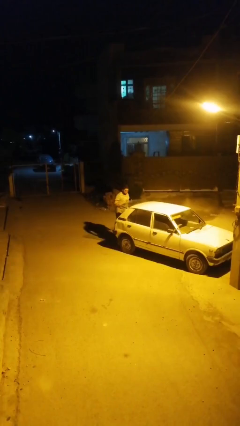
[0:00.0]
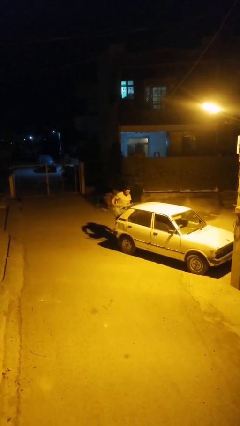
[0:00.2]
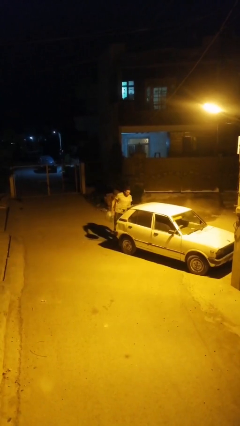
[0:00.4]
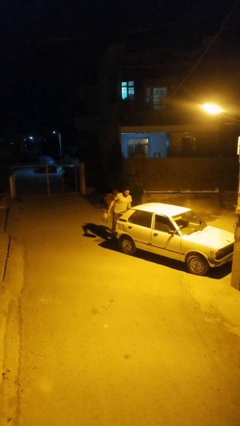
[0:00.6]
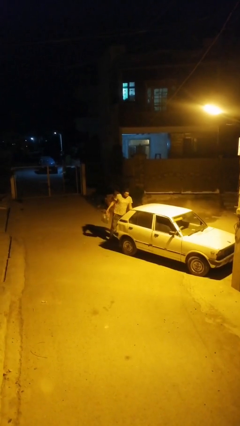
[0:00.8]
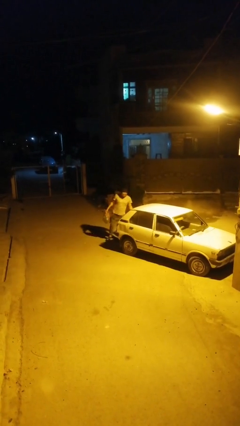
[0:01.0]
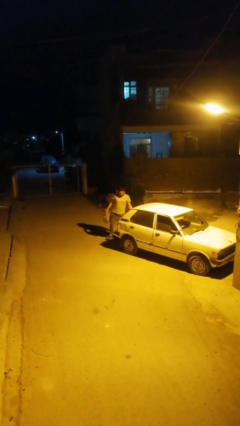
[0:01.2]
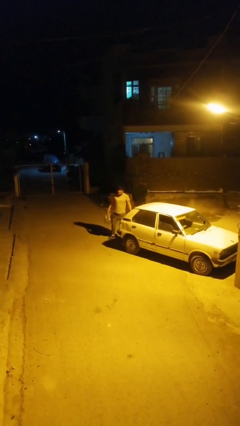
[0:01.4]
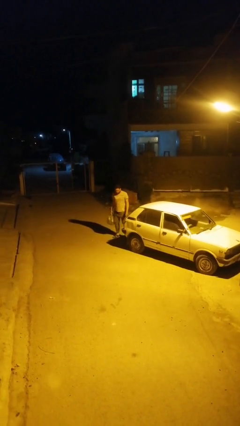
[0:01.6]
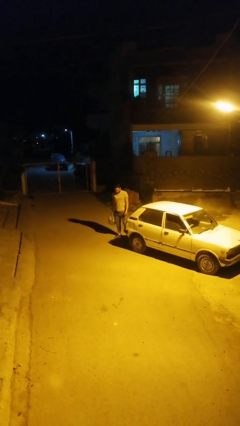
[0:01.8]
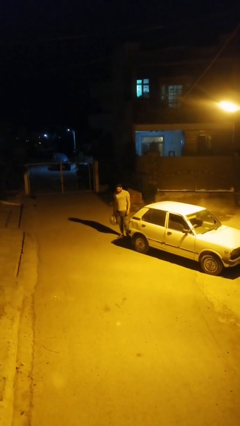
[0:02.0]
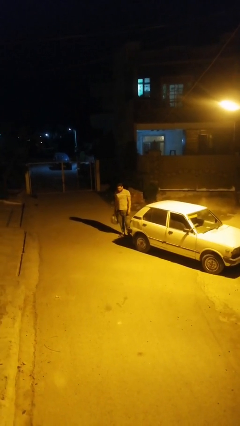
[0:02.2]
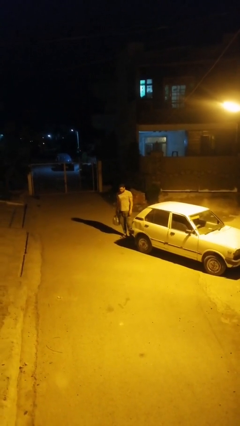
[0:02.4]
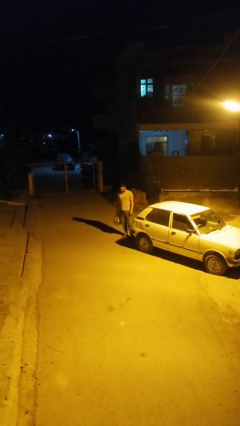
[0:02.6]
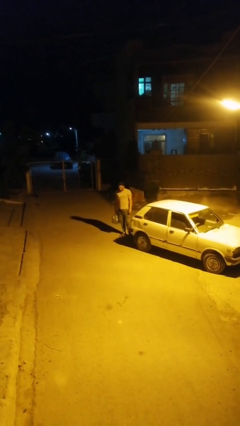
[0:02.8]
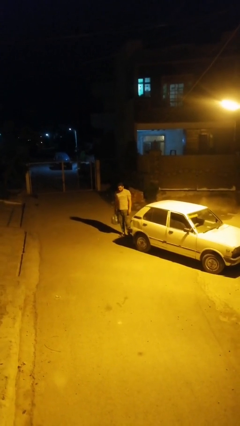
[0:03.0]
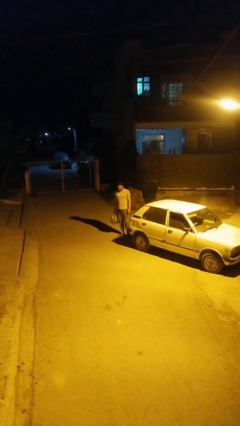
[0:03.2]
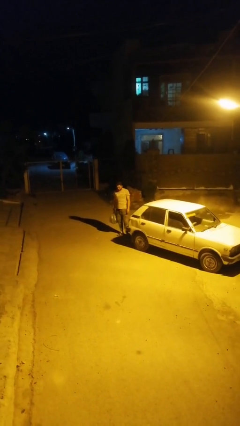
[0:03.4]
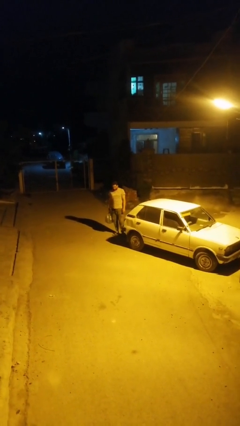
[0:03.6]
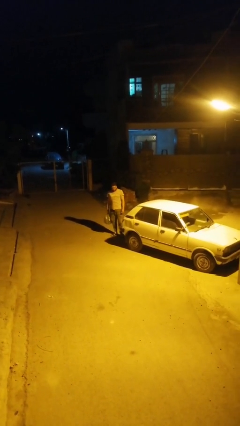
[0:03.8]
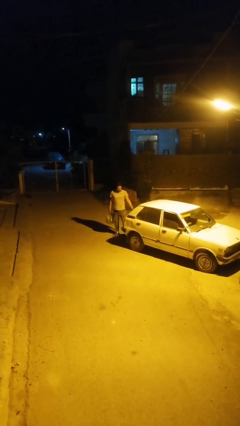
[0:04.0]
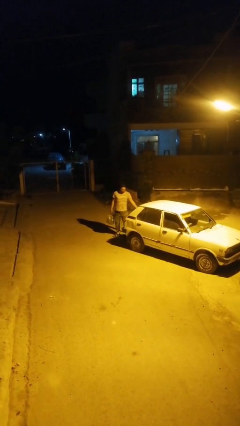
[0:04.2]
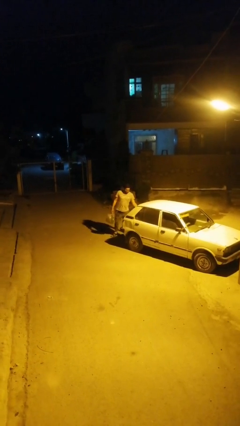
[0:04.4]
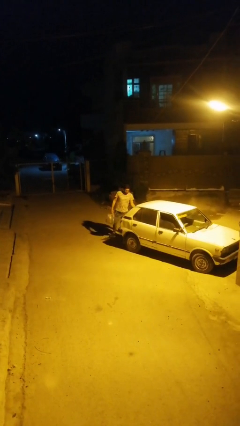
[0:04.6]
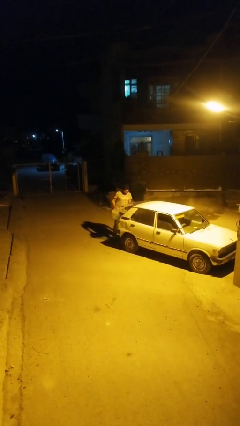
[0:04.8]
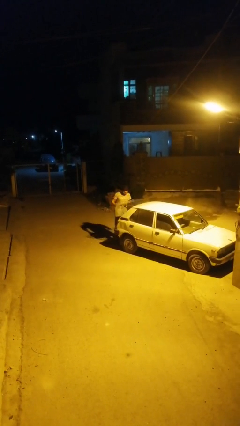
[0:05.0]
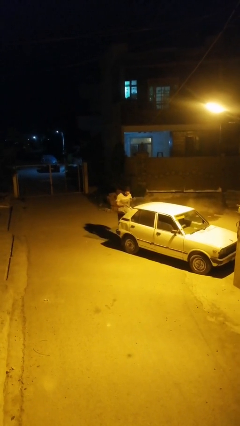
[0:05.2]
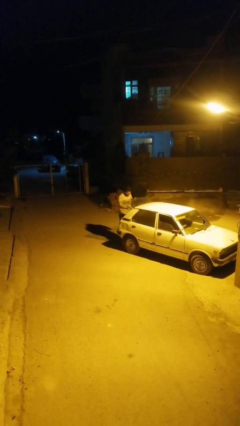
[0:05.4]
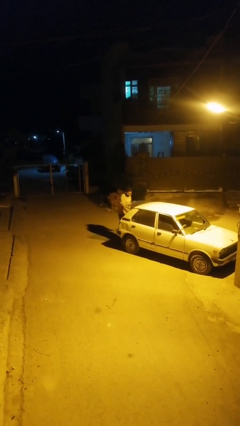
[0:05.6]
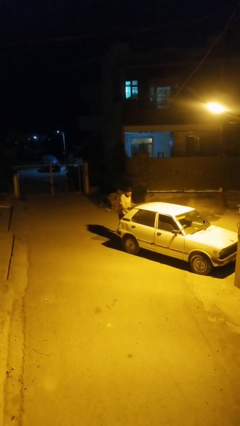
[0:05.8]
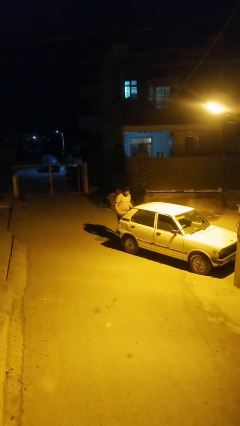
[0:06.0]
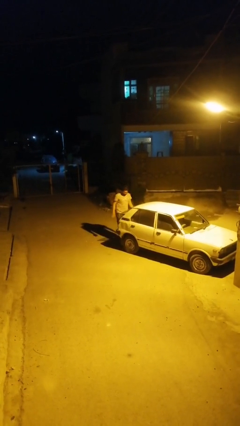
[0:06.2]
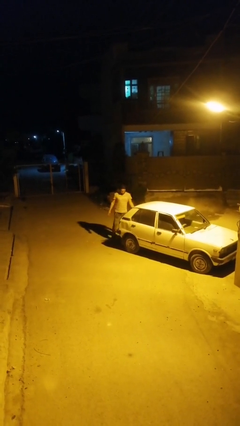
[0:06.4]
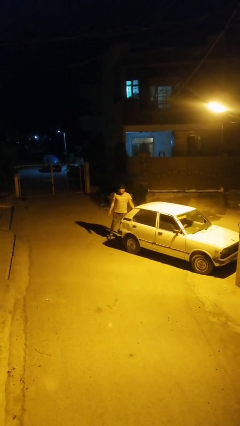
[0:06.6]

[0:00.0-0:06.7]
person unloads car

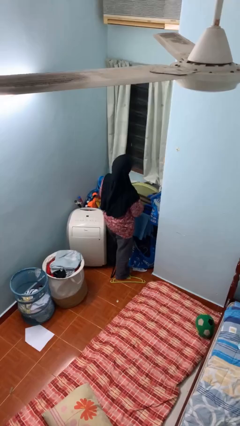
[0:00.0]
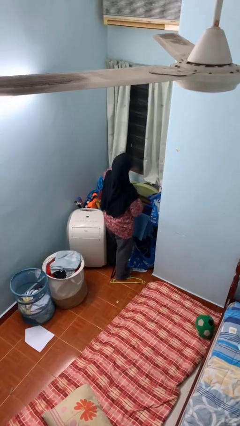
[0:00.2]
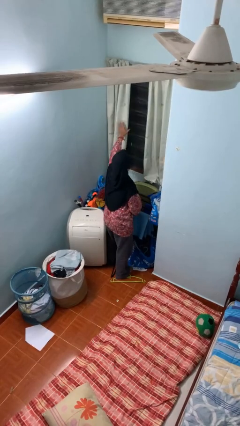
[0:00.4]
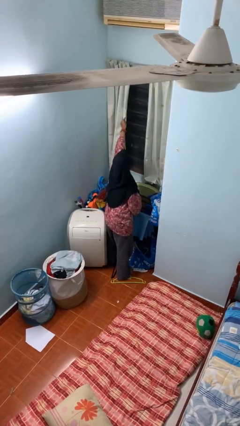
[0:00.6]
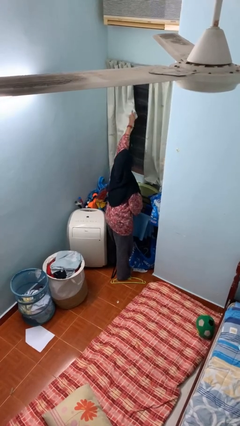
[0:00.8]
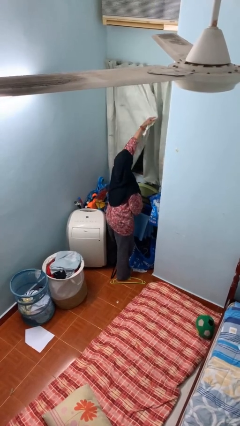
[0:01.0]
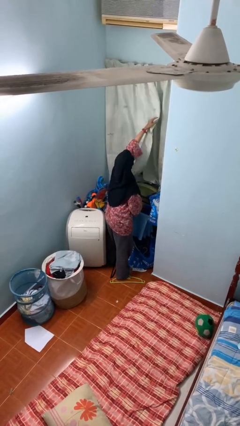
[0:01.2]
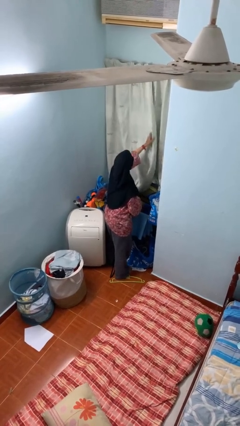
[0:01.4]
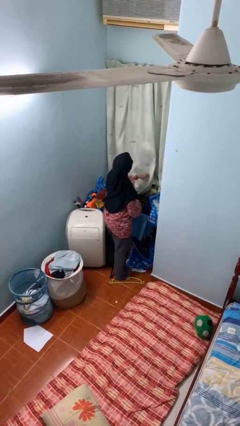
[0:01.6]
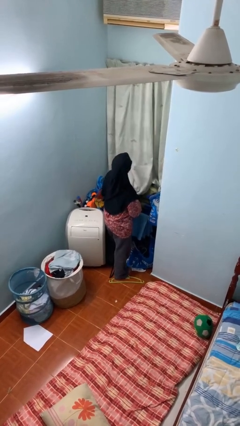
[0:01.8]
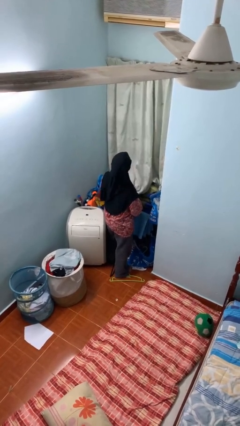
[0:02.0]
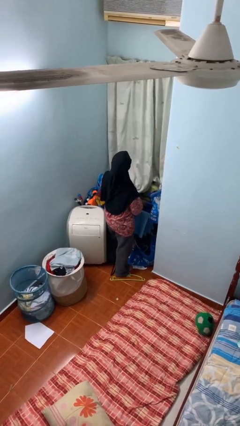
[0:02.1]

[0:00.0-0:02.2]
person closes curtains

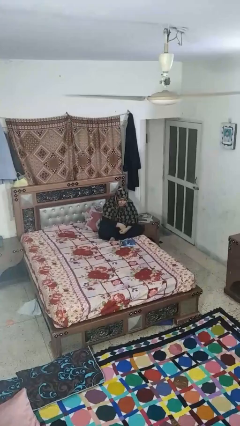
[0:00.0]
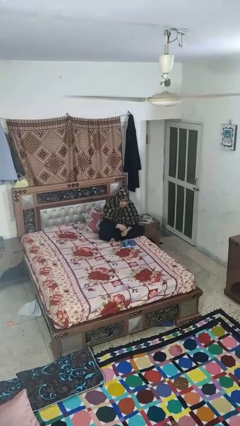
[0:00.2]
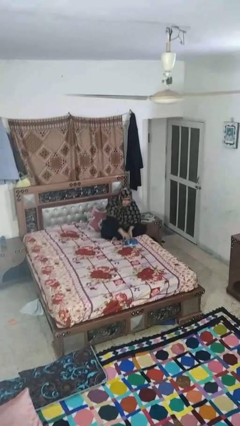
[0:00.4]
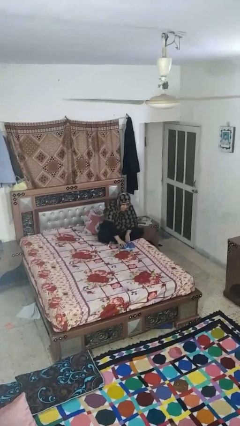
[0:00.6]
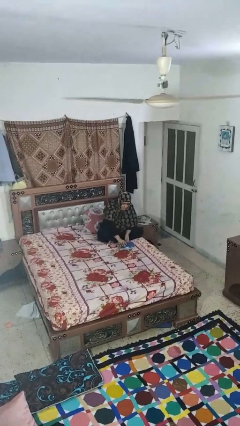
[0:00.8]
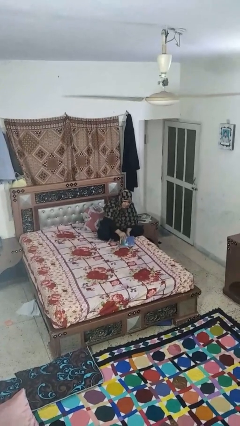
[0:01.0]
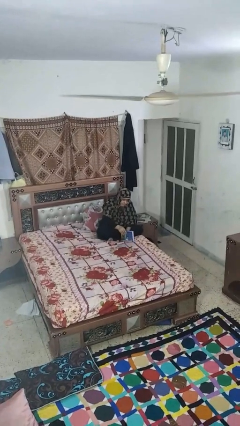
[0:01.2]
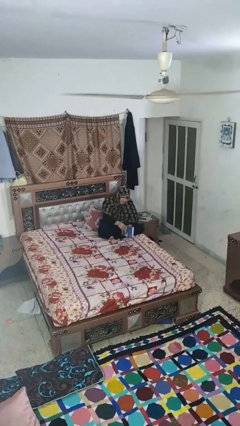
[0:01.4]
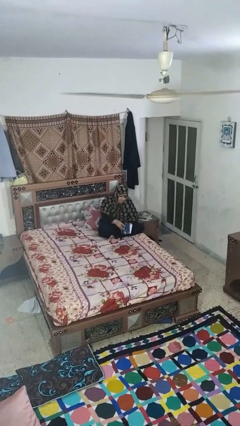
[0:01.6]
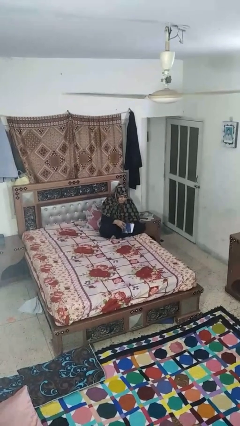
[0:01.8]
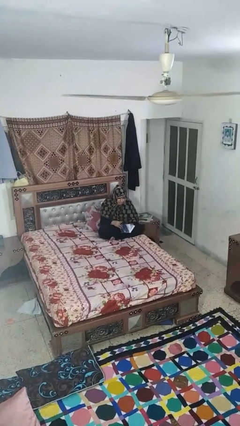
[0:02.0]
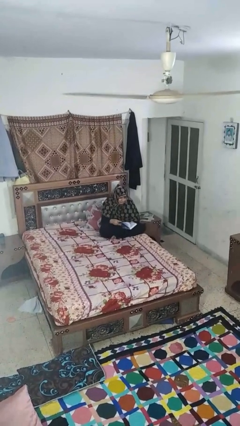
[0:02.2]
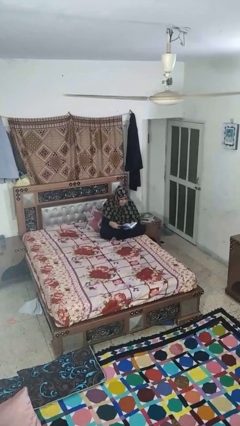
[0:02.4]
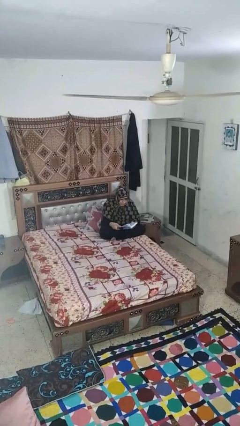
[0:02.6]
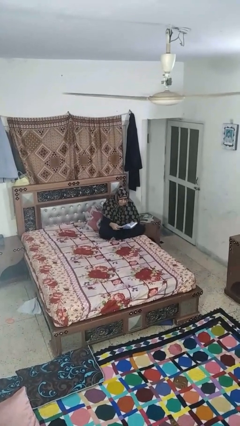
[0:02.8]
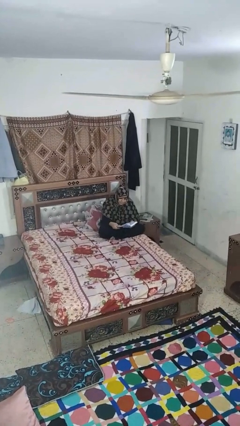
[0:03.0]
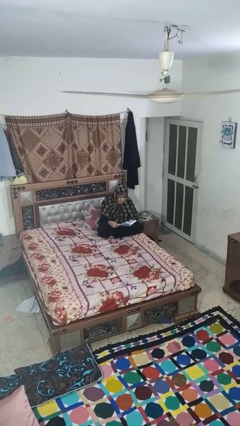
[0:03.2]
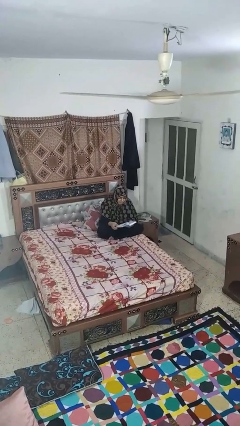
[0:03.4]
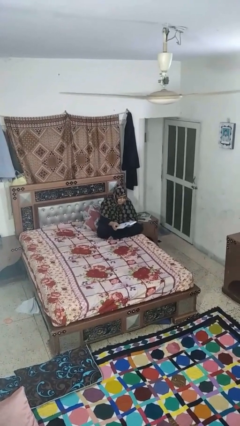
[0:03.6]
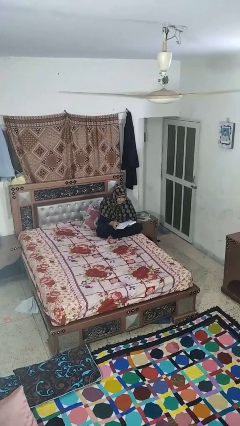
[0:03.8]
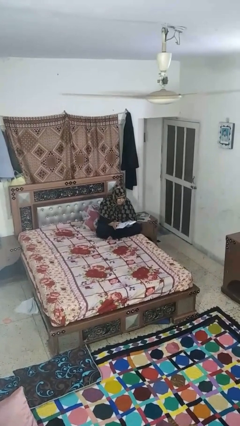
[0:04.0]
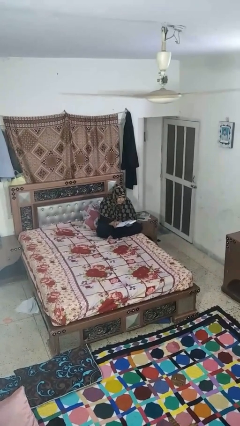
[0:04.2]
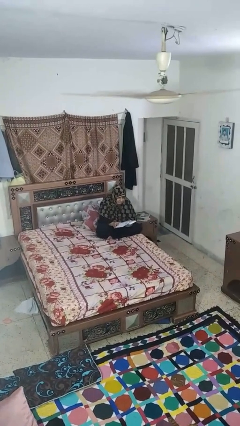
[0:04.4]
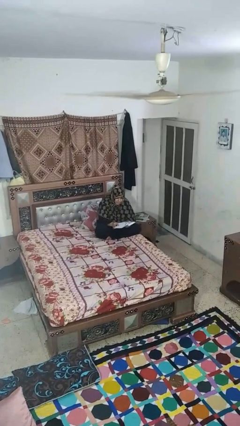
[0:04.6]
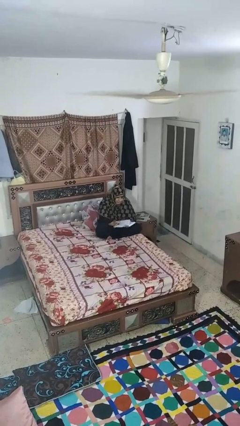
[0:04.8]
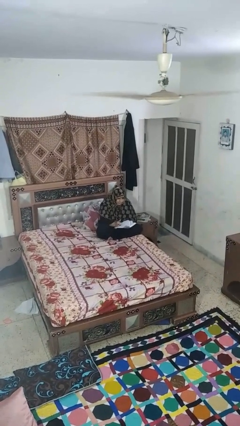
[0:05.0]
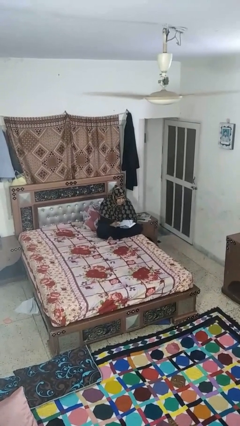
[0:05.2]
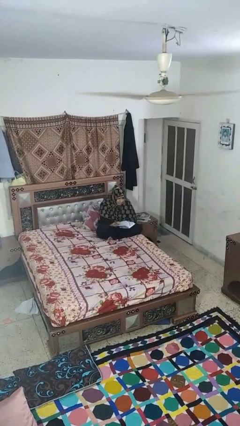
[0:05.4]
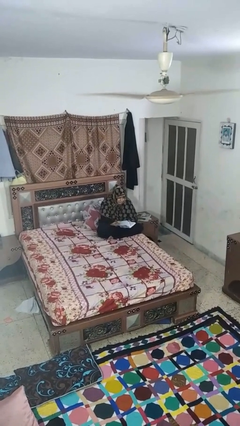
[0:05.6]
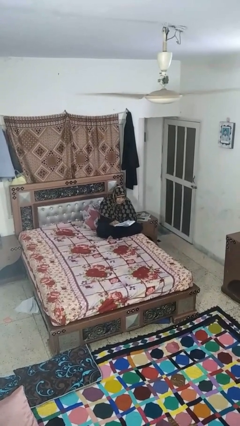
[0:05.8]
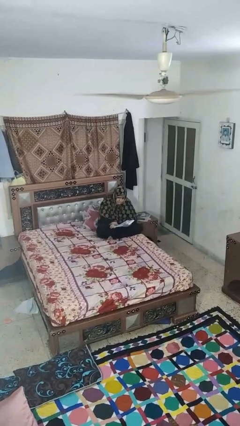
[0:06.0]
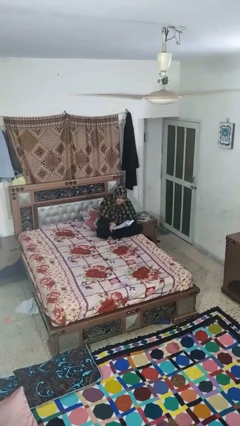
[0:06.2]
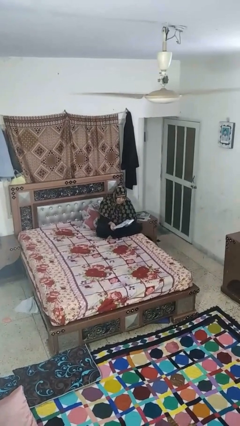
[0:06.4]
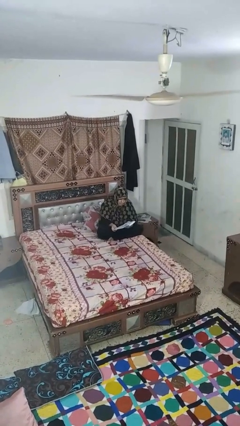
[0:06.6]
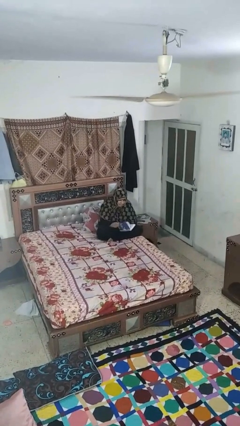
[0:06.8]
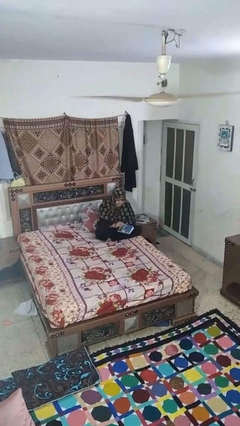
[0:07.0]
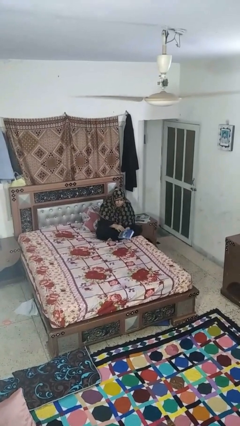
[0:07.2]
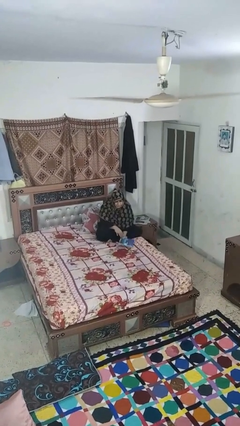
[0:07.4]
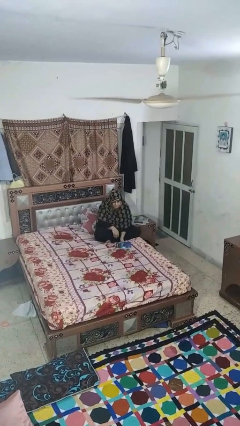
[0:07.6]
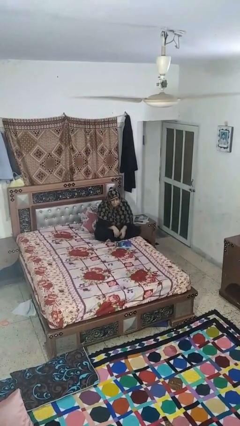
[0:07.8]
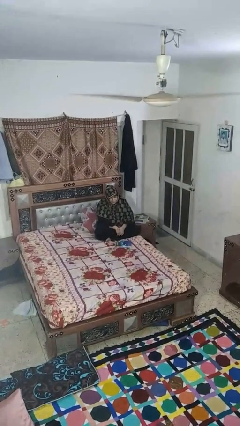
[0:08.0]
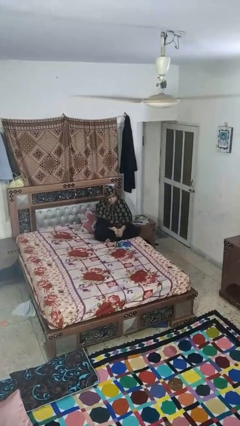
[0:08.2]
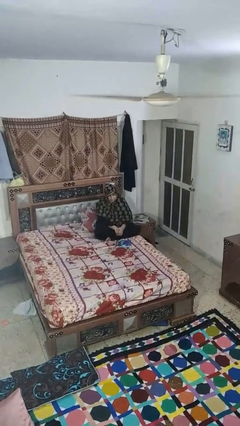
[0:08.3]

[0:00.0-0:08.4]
person reads book

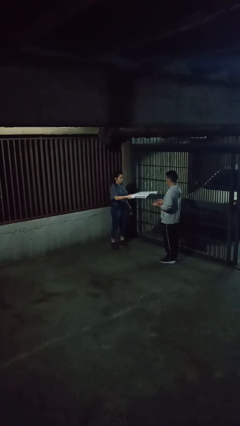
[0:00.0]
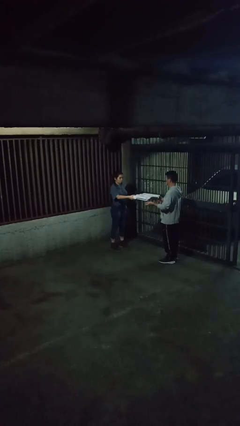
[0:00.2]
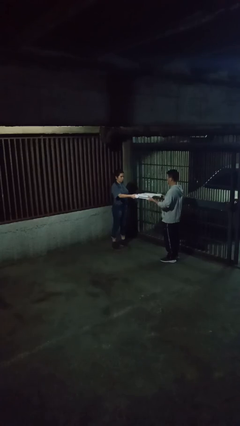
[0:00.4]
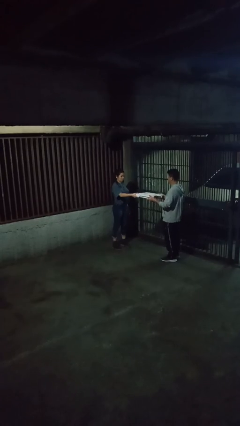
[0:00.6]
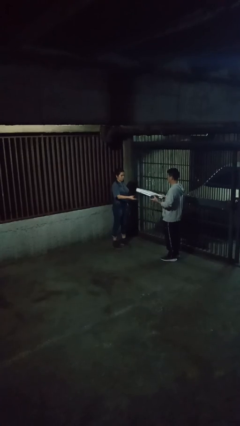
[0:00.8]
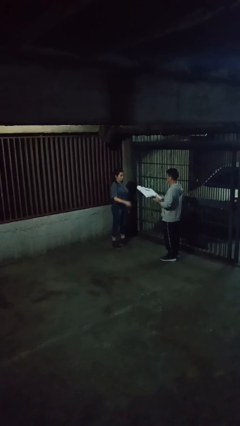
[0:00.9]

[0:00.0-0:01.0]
person transfers object to person
